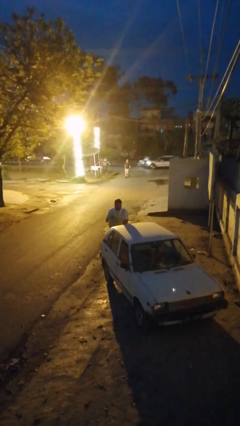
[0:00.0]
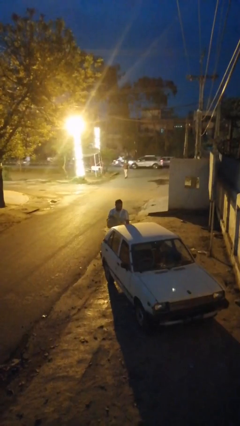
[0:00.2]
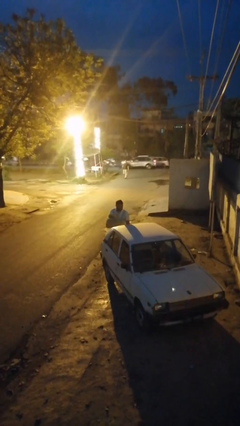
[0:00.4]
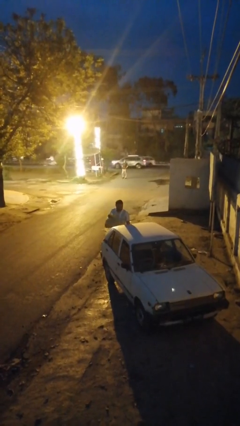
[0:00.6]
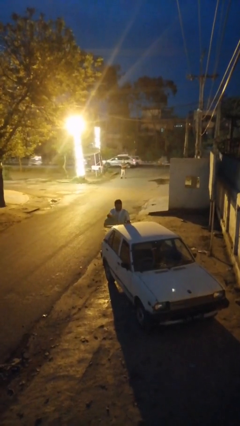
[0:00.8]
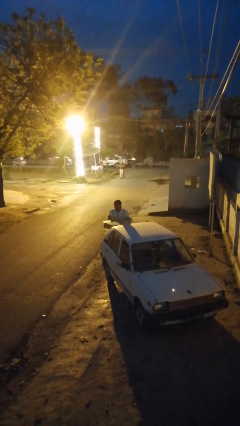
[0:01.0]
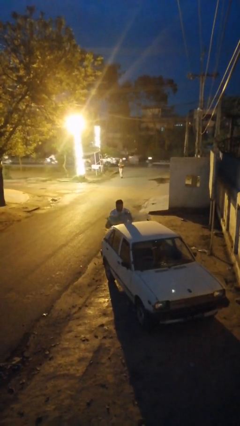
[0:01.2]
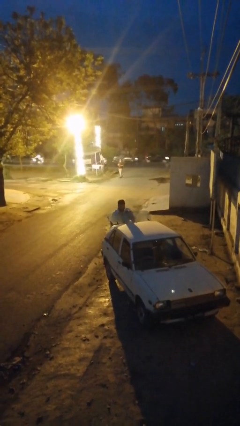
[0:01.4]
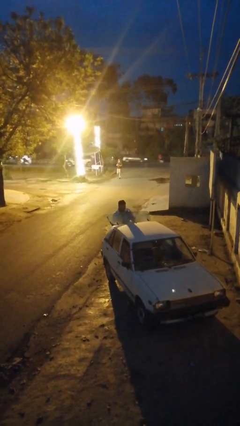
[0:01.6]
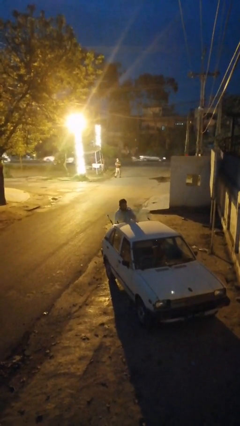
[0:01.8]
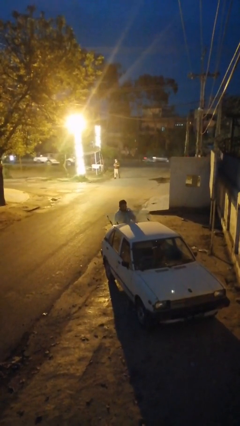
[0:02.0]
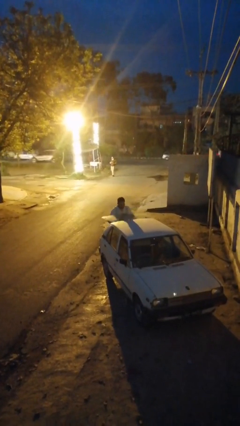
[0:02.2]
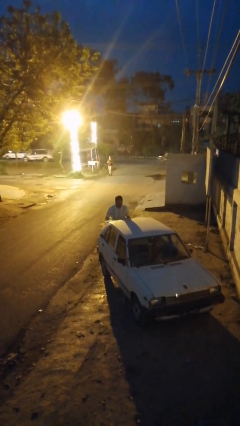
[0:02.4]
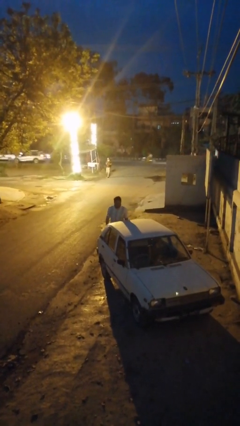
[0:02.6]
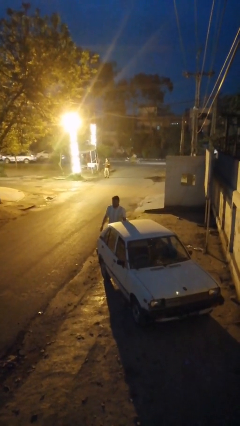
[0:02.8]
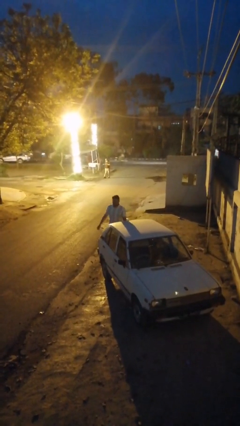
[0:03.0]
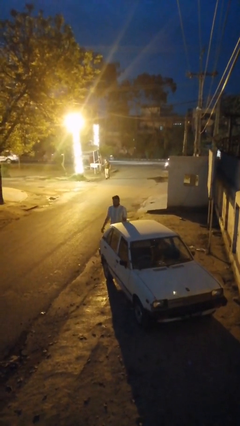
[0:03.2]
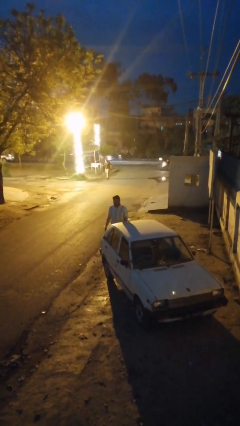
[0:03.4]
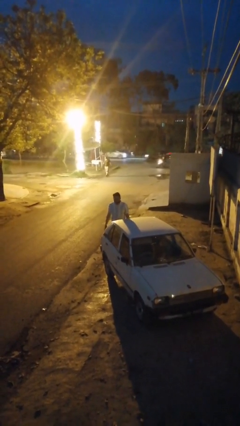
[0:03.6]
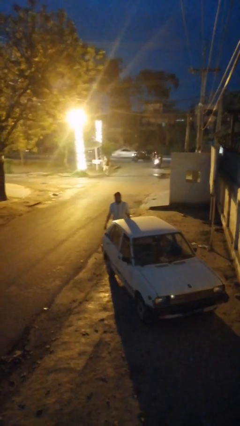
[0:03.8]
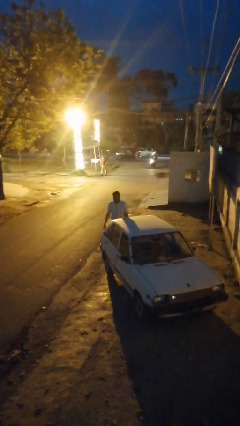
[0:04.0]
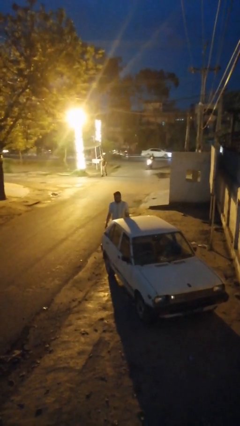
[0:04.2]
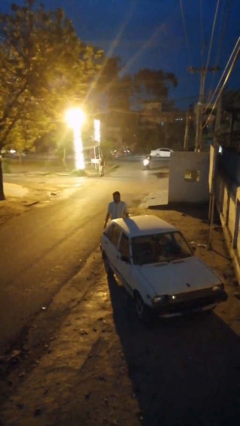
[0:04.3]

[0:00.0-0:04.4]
person loads car

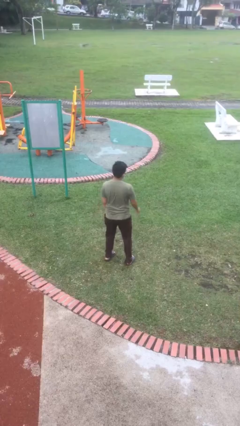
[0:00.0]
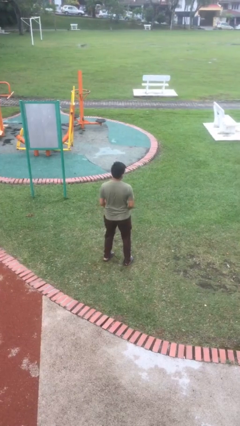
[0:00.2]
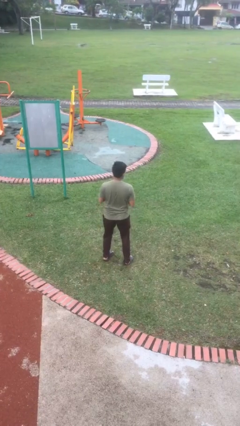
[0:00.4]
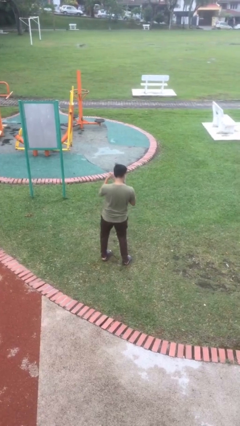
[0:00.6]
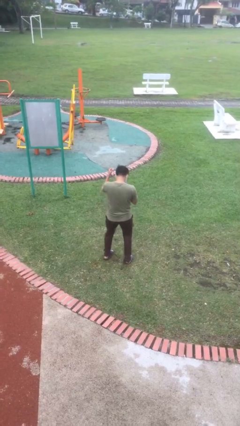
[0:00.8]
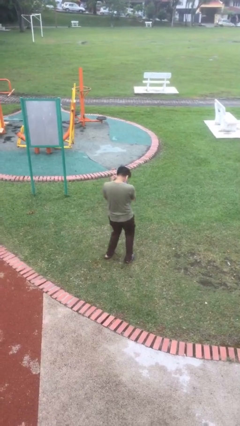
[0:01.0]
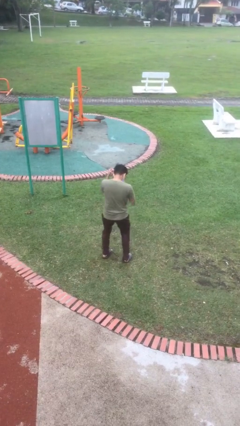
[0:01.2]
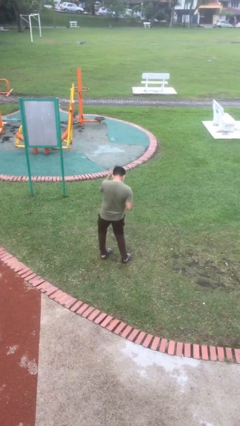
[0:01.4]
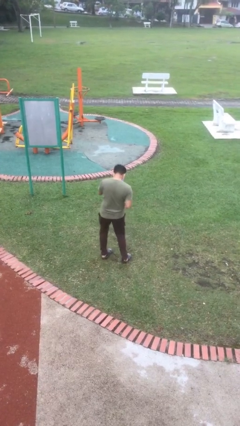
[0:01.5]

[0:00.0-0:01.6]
person dances in place

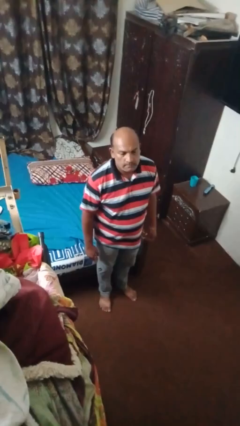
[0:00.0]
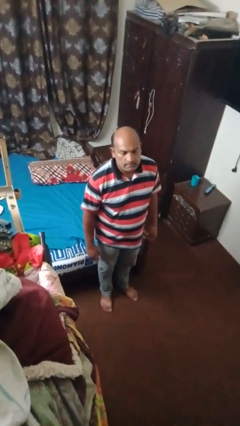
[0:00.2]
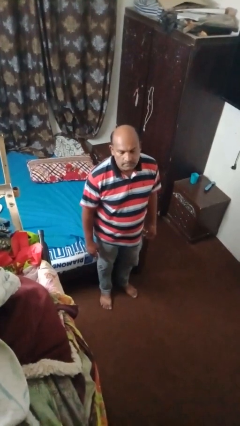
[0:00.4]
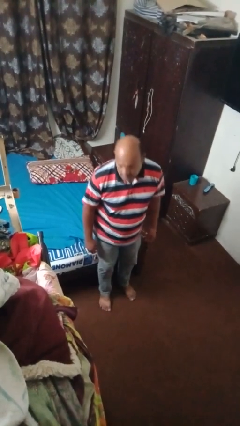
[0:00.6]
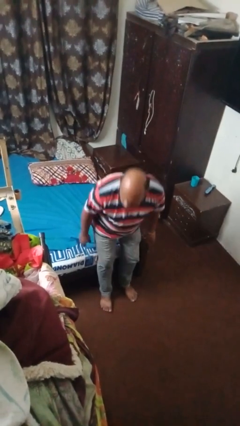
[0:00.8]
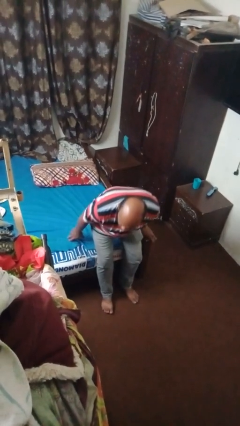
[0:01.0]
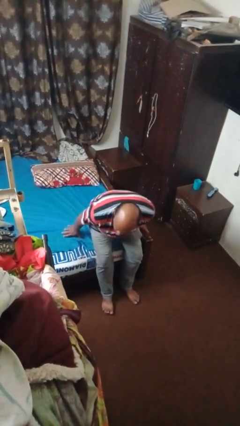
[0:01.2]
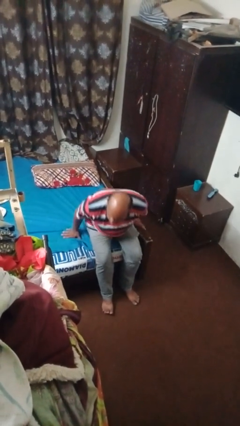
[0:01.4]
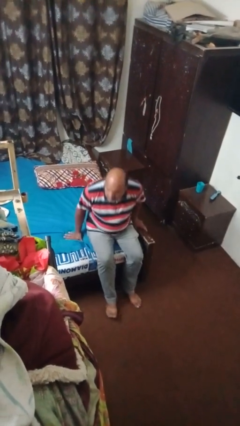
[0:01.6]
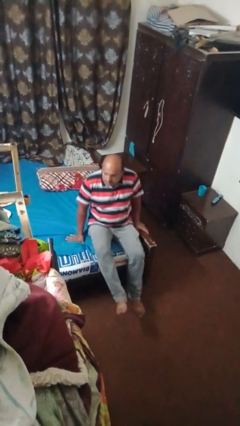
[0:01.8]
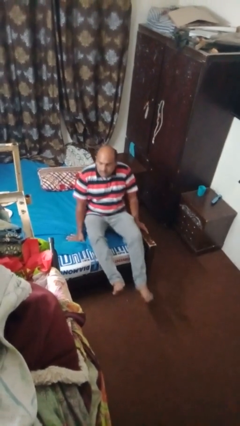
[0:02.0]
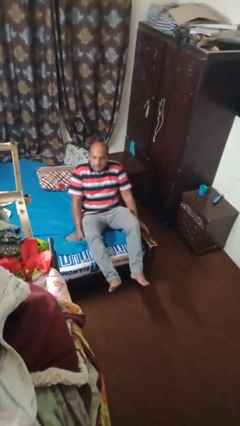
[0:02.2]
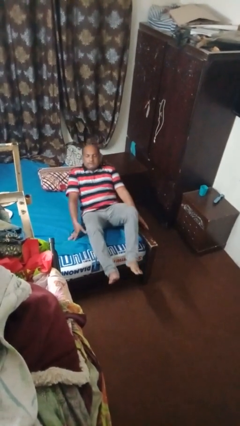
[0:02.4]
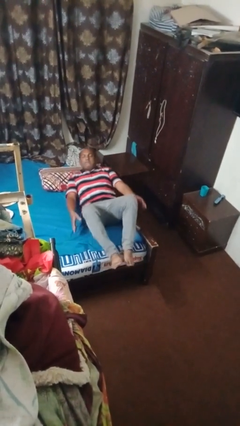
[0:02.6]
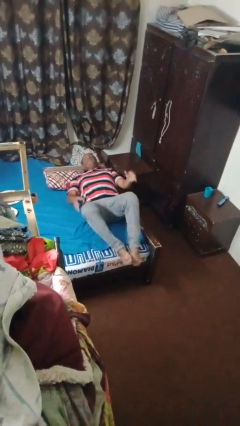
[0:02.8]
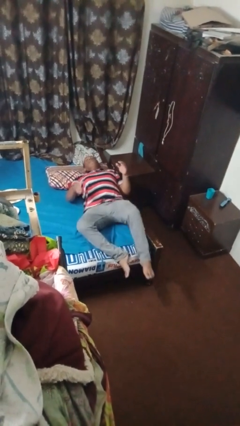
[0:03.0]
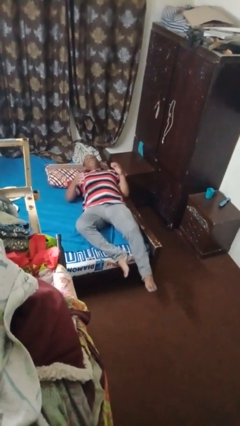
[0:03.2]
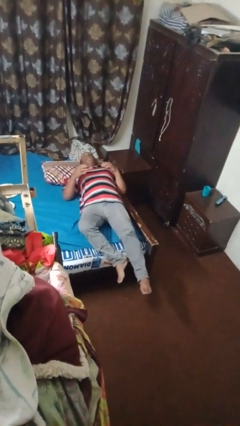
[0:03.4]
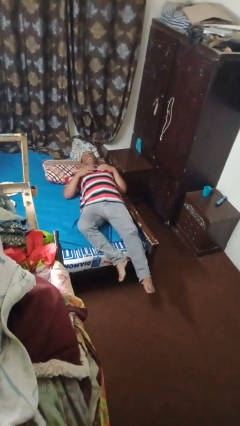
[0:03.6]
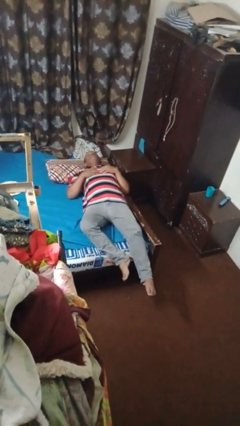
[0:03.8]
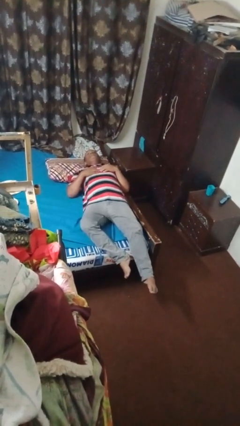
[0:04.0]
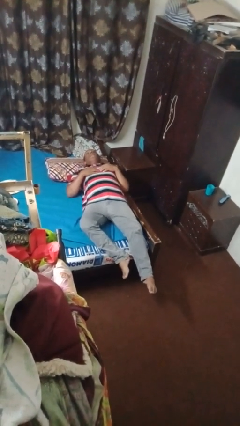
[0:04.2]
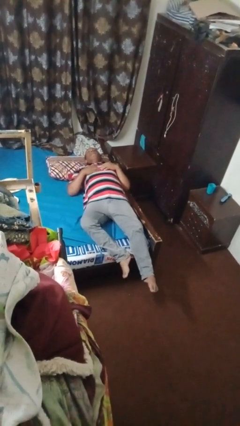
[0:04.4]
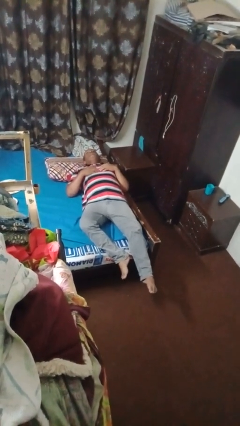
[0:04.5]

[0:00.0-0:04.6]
person lies down on bed

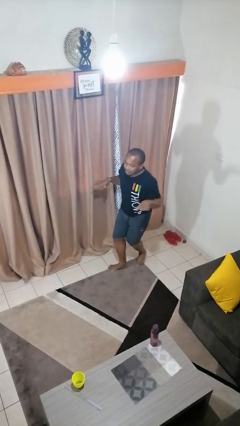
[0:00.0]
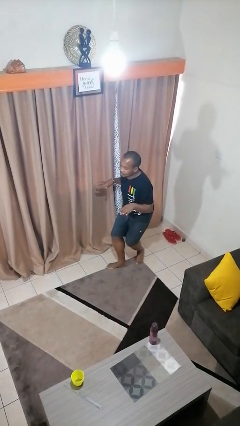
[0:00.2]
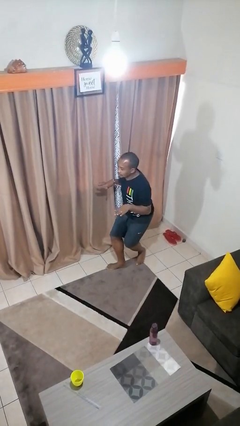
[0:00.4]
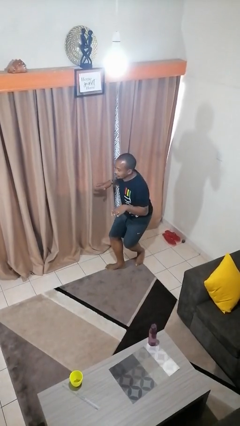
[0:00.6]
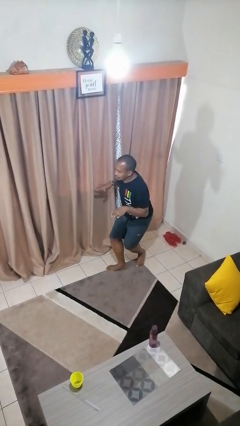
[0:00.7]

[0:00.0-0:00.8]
person picks up object from floor

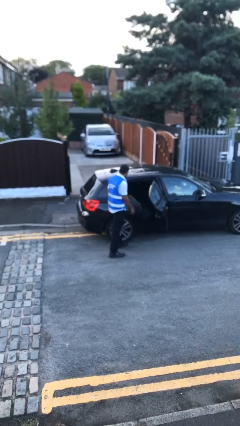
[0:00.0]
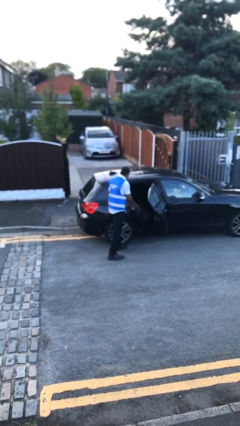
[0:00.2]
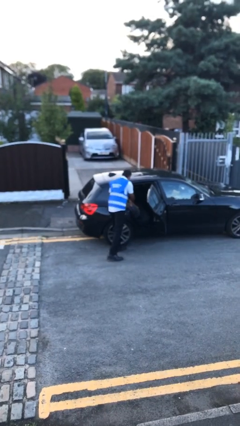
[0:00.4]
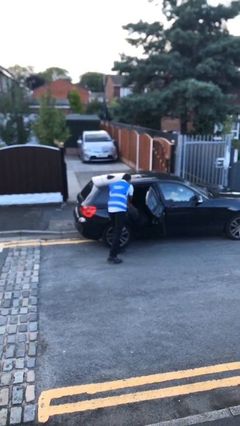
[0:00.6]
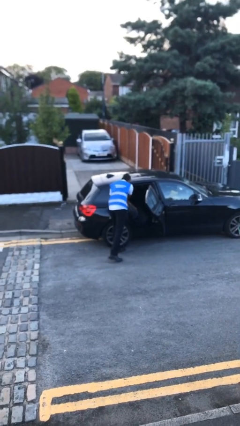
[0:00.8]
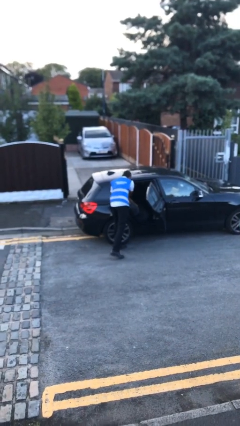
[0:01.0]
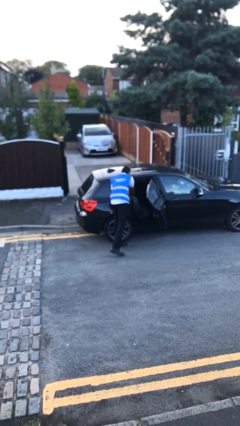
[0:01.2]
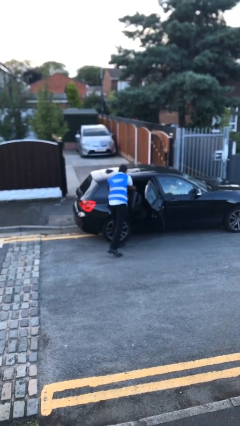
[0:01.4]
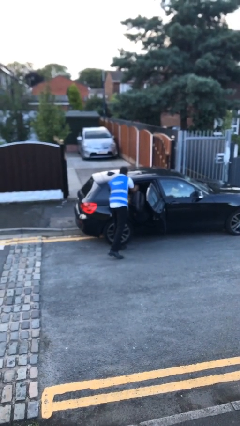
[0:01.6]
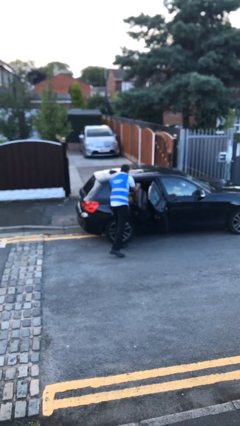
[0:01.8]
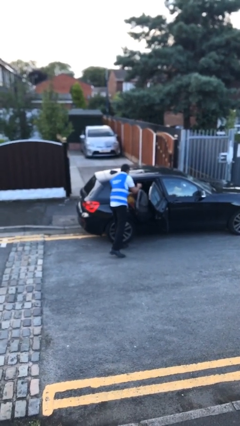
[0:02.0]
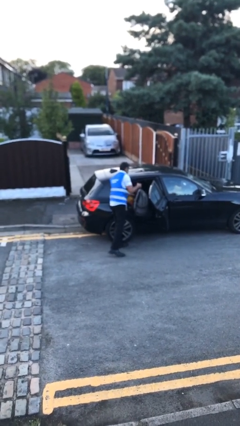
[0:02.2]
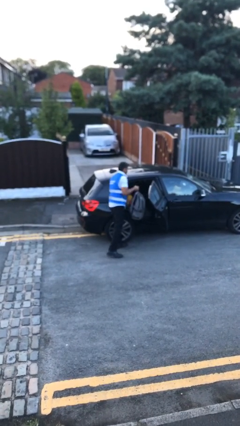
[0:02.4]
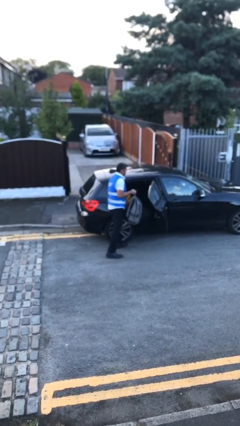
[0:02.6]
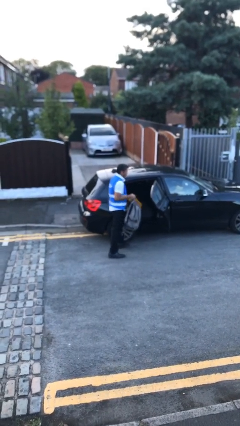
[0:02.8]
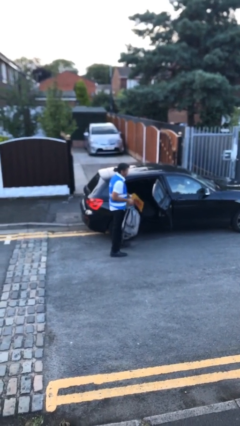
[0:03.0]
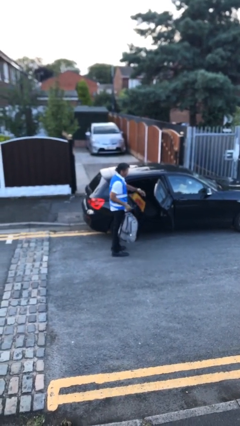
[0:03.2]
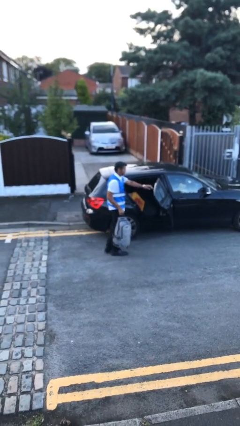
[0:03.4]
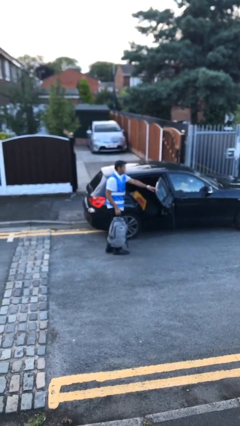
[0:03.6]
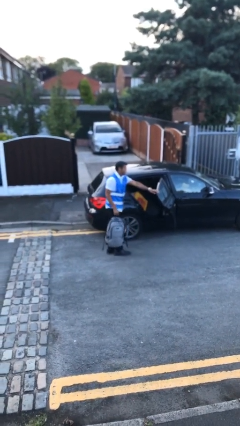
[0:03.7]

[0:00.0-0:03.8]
person unloads car

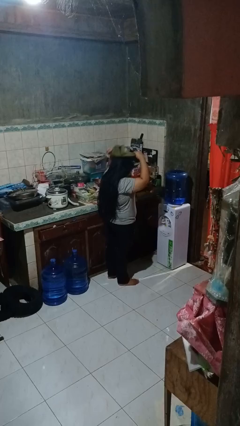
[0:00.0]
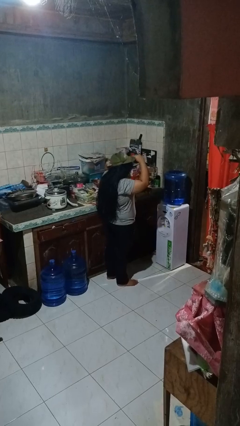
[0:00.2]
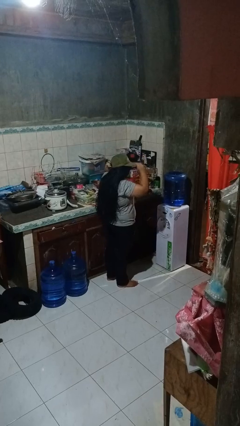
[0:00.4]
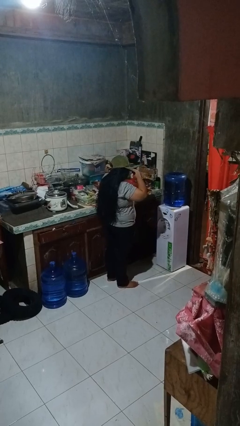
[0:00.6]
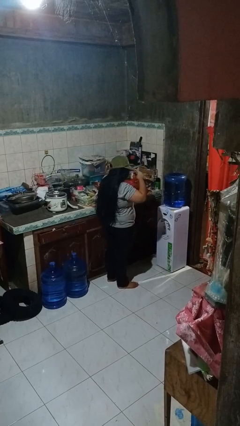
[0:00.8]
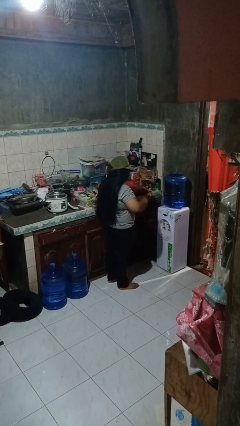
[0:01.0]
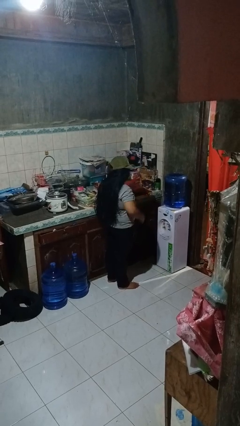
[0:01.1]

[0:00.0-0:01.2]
person puts on hat

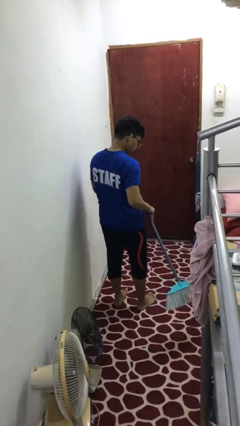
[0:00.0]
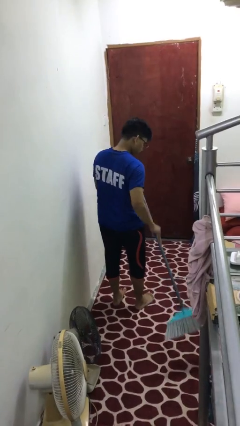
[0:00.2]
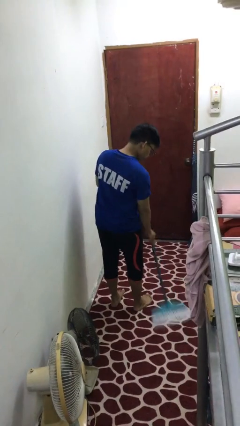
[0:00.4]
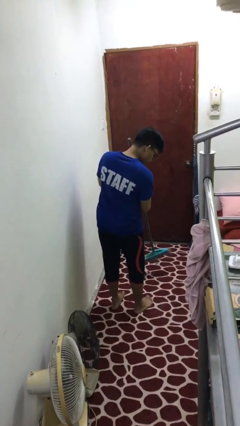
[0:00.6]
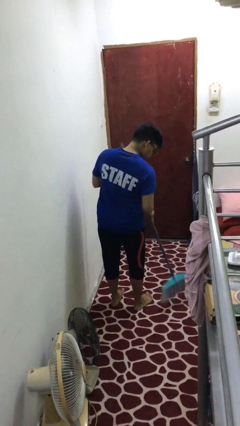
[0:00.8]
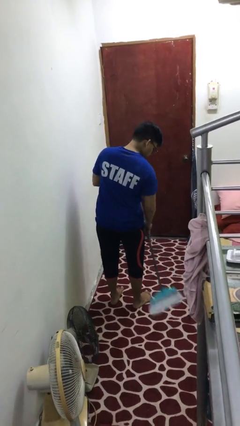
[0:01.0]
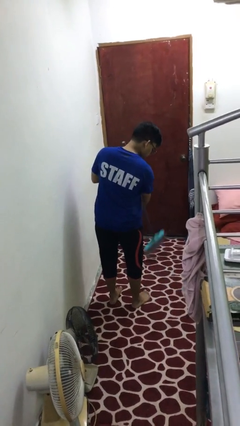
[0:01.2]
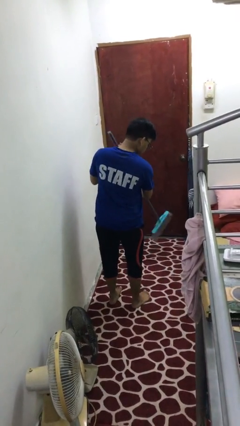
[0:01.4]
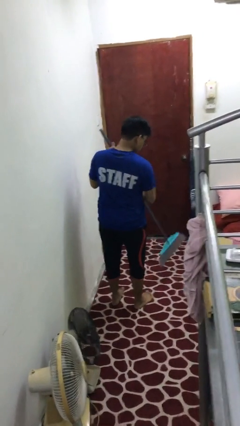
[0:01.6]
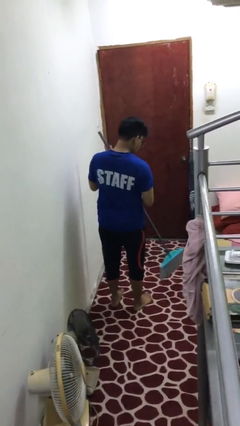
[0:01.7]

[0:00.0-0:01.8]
person sweeps floor
